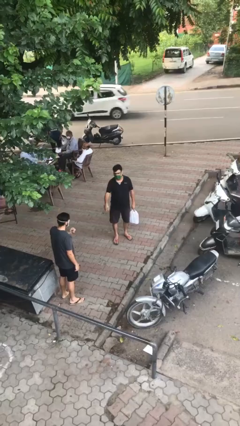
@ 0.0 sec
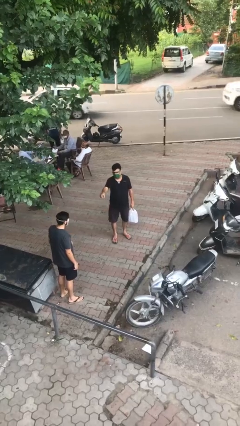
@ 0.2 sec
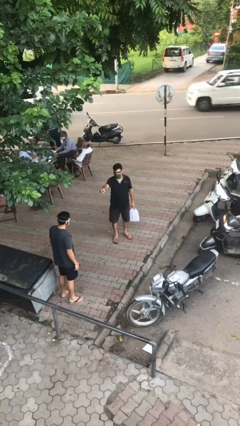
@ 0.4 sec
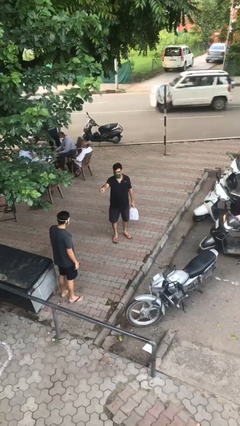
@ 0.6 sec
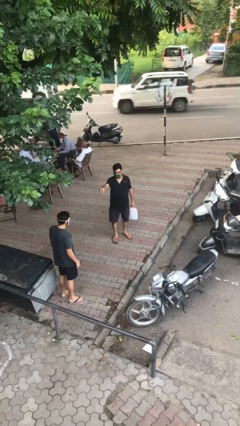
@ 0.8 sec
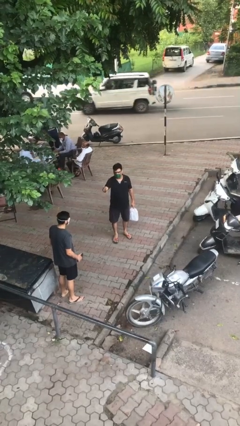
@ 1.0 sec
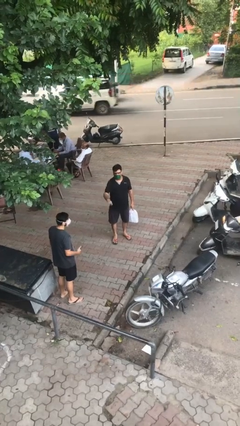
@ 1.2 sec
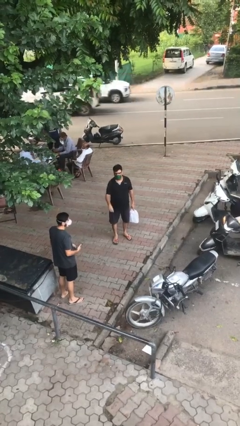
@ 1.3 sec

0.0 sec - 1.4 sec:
person points at person

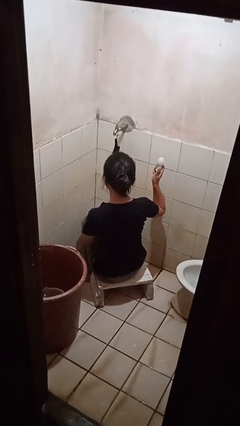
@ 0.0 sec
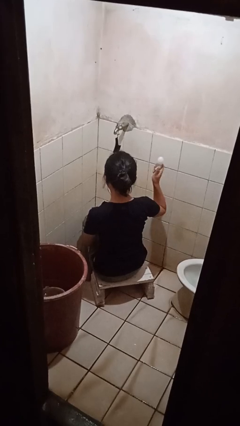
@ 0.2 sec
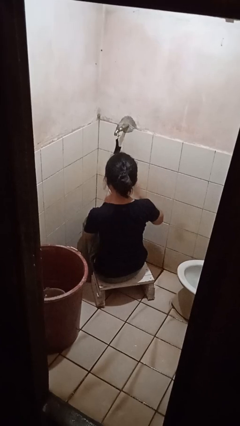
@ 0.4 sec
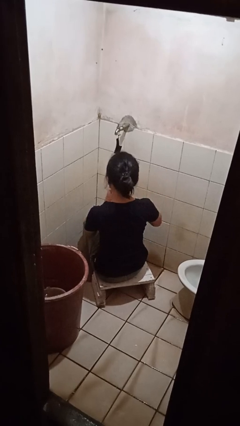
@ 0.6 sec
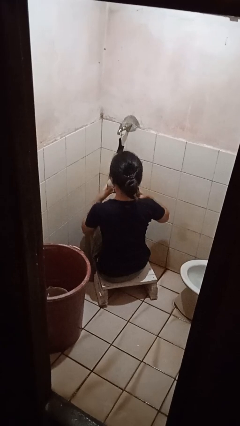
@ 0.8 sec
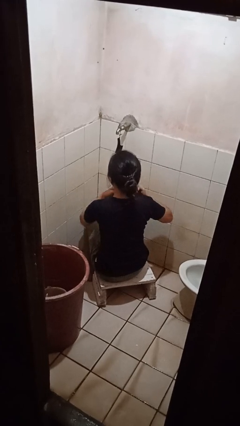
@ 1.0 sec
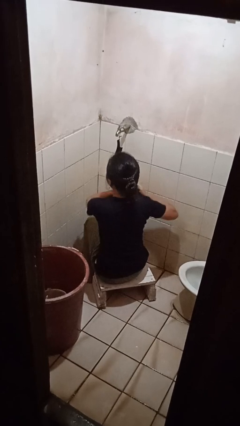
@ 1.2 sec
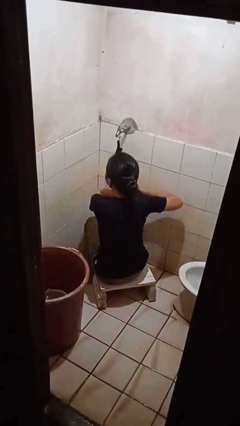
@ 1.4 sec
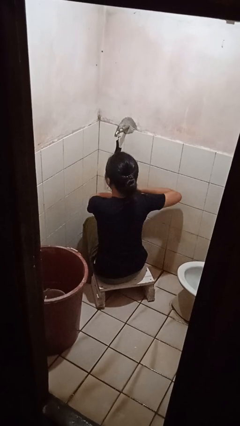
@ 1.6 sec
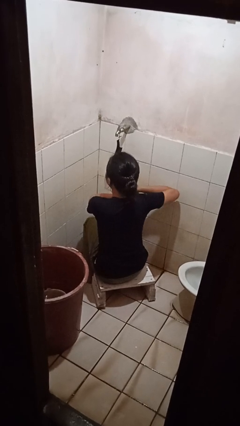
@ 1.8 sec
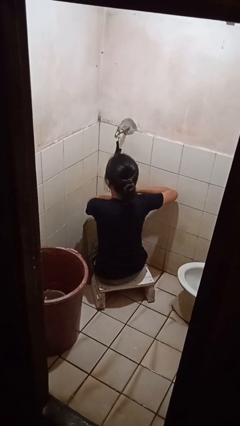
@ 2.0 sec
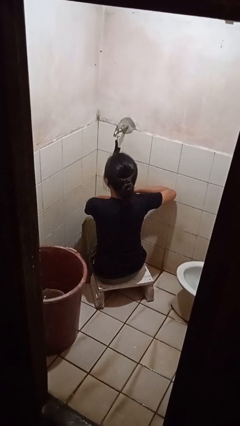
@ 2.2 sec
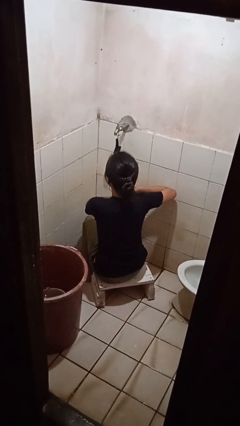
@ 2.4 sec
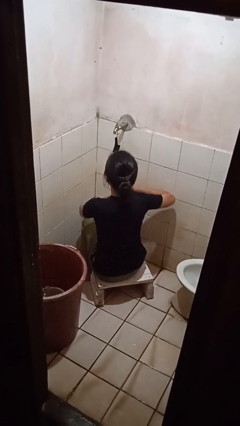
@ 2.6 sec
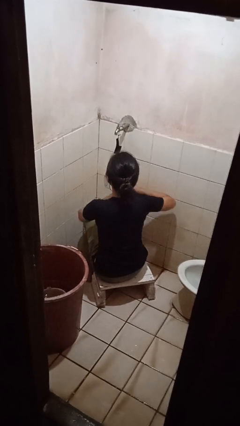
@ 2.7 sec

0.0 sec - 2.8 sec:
person applies deodorant

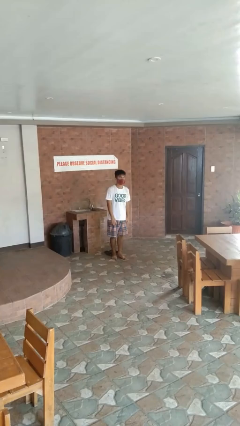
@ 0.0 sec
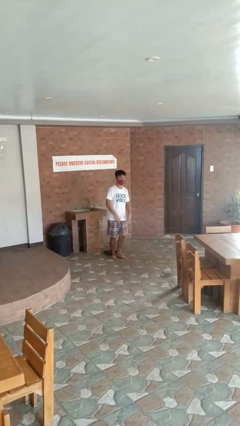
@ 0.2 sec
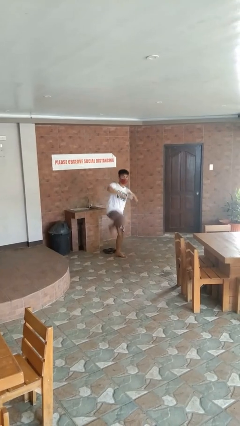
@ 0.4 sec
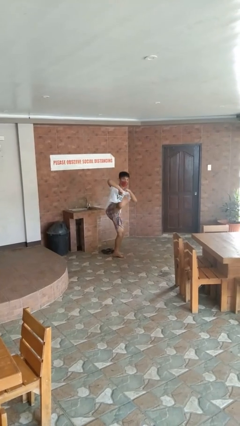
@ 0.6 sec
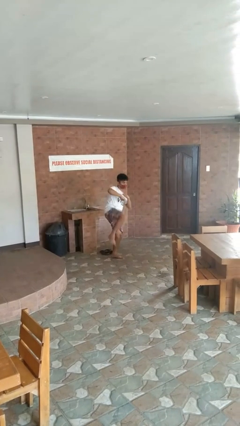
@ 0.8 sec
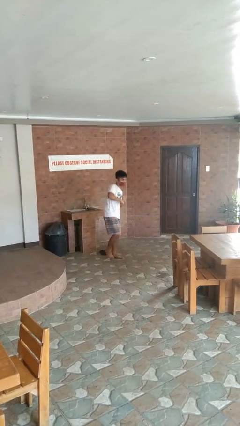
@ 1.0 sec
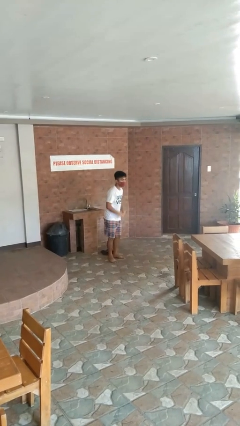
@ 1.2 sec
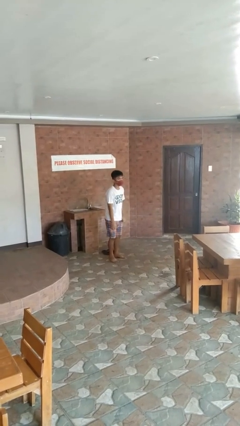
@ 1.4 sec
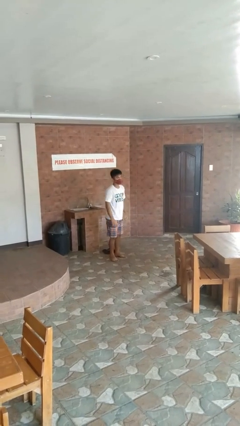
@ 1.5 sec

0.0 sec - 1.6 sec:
person karate kicks

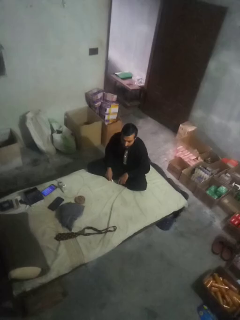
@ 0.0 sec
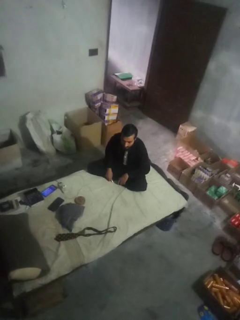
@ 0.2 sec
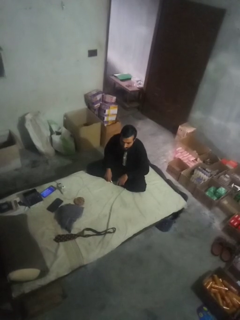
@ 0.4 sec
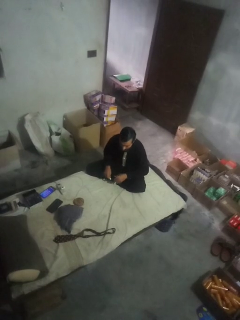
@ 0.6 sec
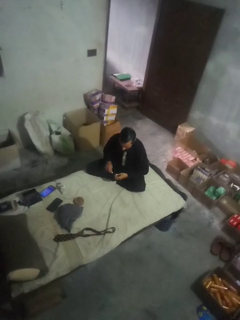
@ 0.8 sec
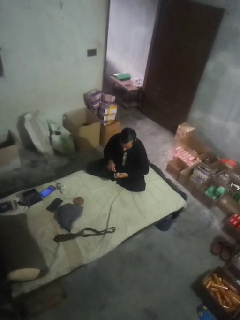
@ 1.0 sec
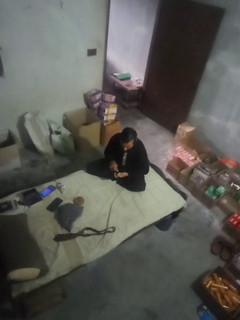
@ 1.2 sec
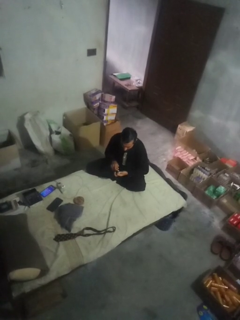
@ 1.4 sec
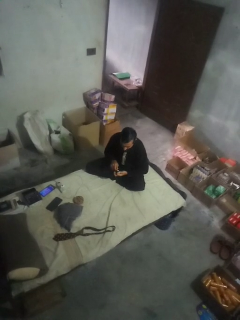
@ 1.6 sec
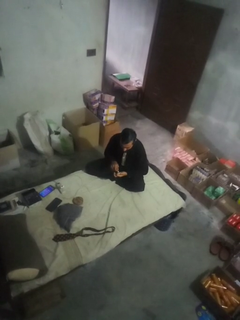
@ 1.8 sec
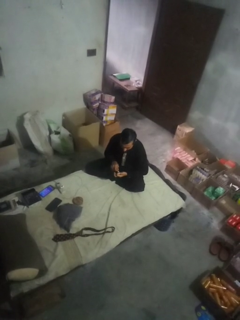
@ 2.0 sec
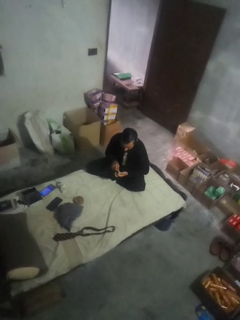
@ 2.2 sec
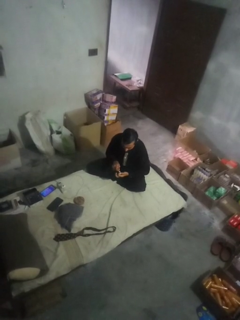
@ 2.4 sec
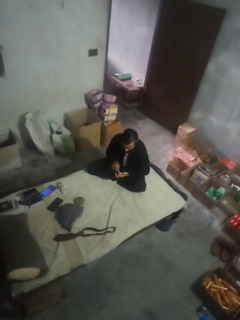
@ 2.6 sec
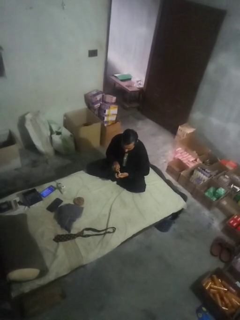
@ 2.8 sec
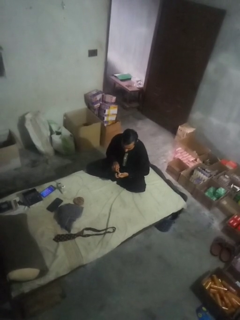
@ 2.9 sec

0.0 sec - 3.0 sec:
person paints fingernails

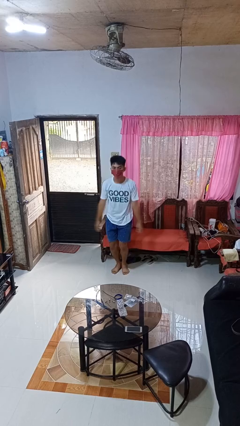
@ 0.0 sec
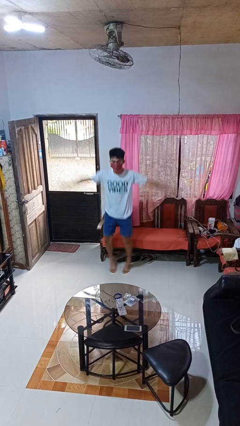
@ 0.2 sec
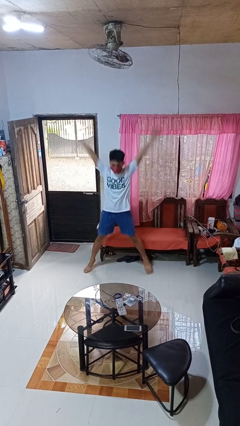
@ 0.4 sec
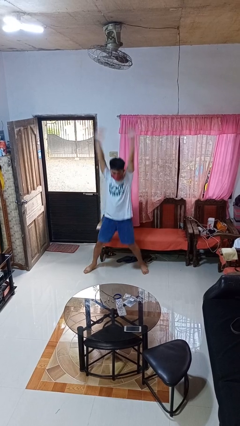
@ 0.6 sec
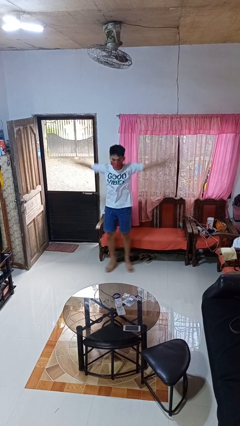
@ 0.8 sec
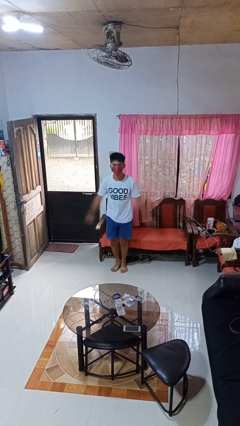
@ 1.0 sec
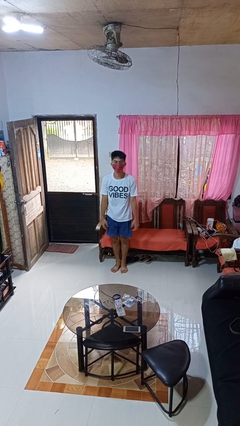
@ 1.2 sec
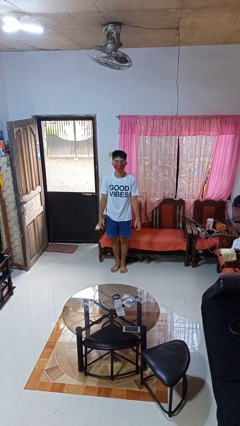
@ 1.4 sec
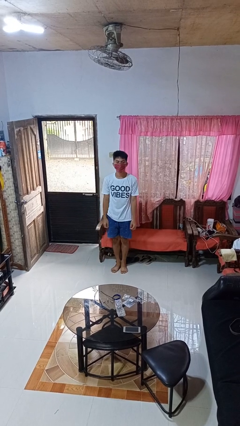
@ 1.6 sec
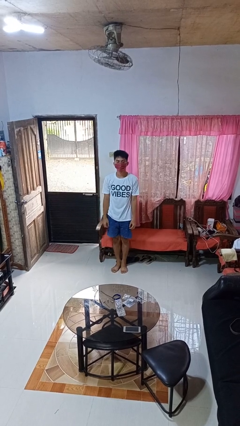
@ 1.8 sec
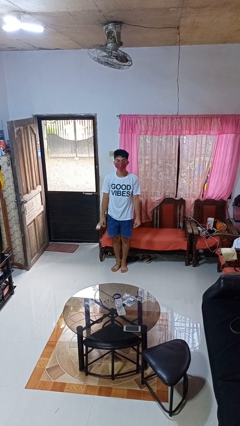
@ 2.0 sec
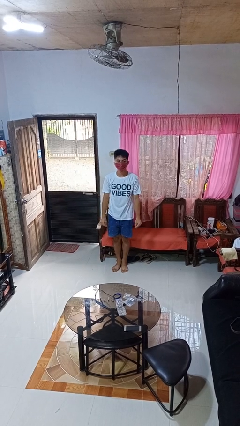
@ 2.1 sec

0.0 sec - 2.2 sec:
person exercises with jumping jacks

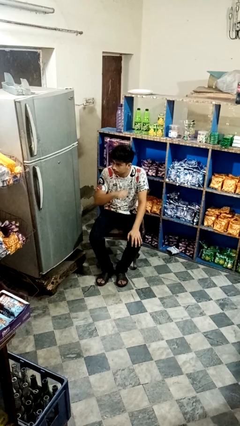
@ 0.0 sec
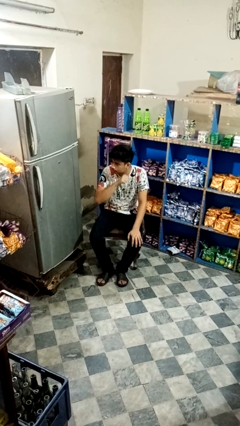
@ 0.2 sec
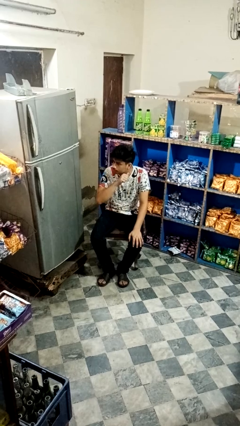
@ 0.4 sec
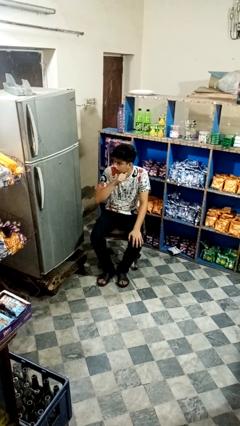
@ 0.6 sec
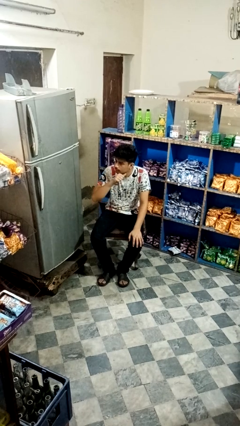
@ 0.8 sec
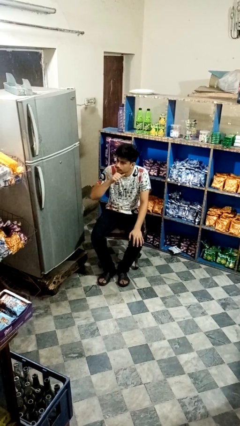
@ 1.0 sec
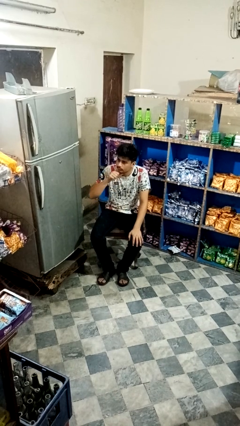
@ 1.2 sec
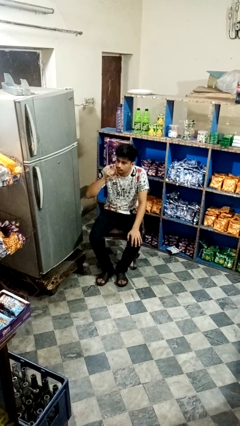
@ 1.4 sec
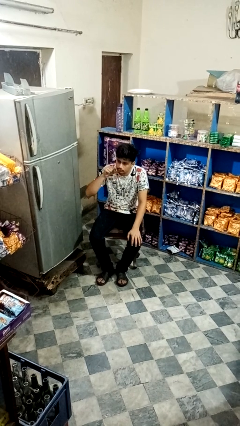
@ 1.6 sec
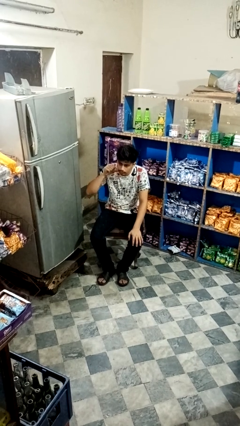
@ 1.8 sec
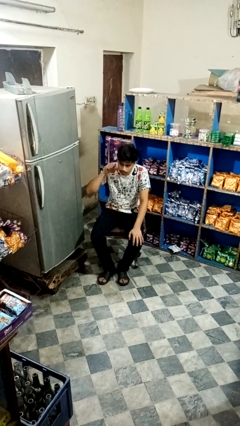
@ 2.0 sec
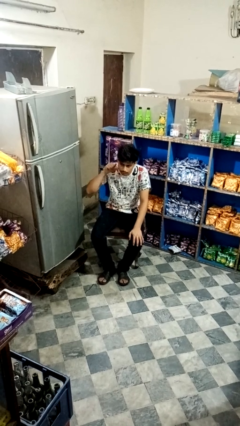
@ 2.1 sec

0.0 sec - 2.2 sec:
person gestures cut

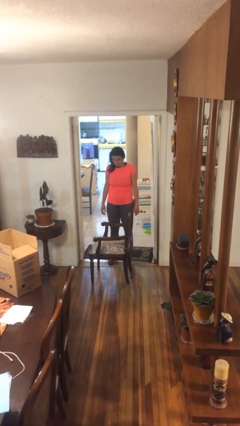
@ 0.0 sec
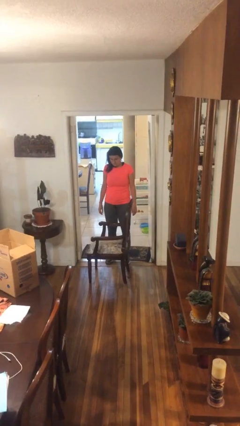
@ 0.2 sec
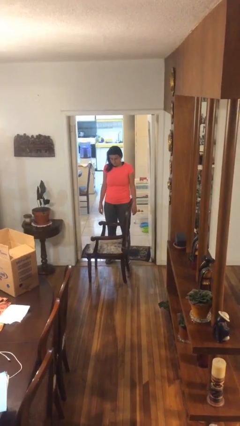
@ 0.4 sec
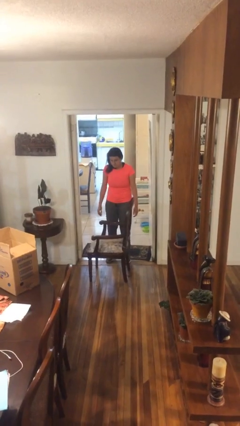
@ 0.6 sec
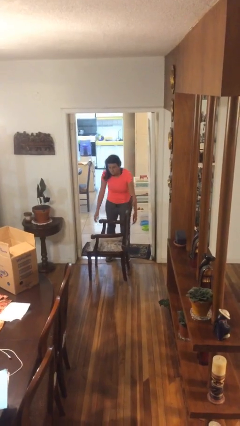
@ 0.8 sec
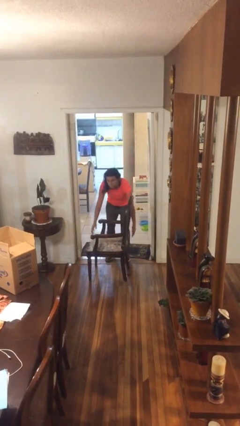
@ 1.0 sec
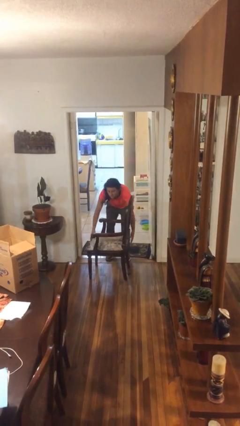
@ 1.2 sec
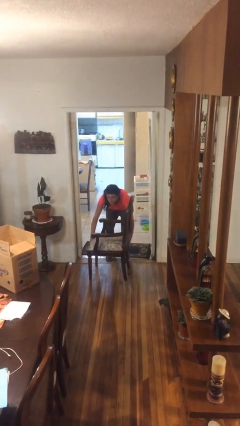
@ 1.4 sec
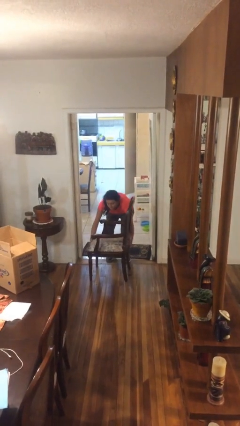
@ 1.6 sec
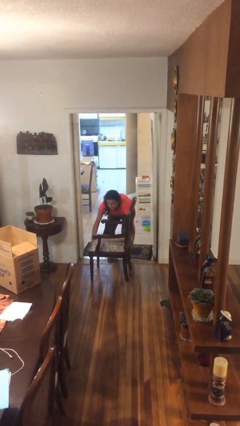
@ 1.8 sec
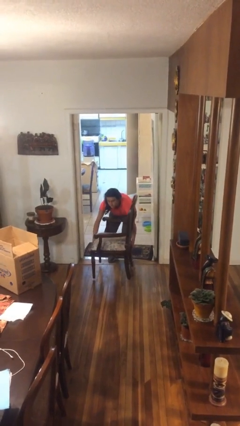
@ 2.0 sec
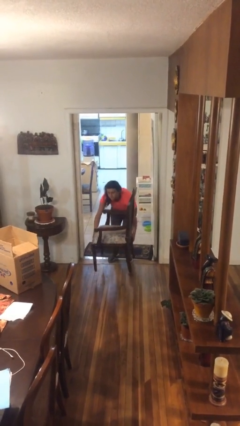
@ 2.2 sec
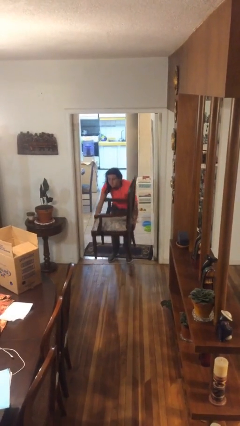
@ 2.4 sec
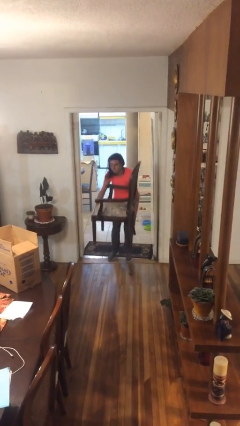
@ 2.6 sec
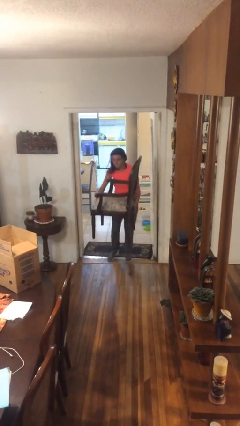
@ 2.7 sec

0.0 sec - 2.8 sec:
person picks up object from floor

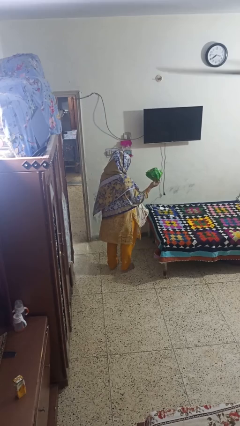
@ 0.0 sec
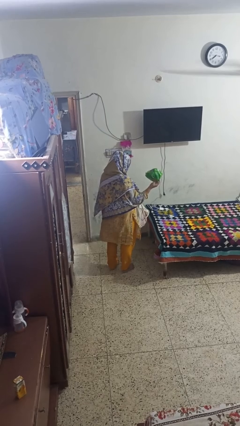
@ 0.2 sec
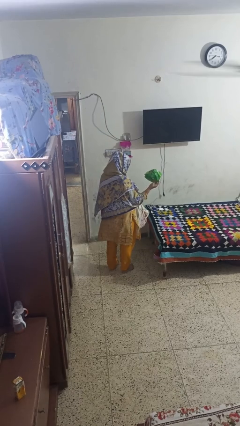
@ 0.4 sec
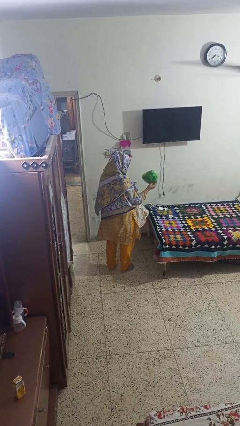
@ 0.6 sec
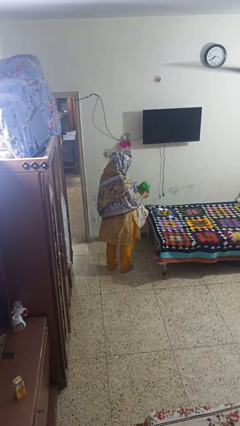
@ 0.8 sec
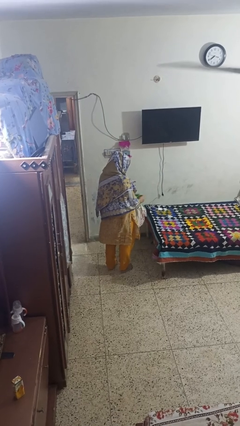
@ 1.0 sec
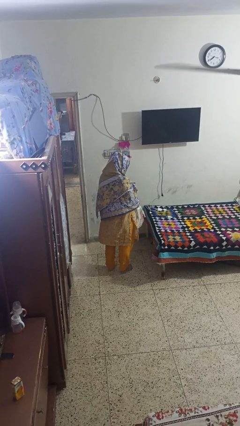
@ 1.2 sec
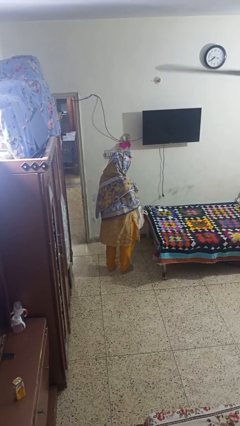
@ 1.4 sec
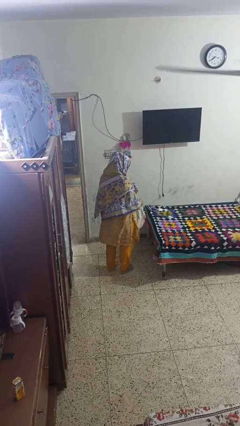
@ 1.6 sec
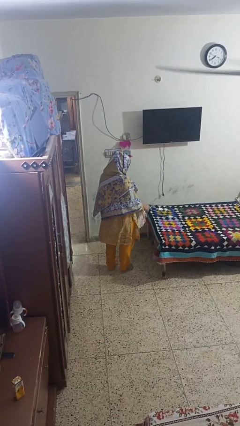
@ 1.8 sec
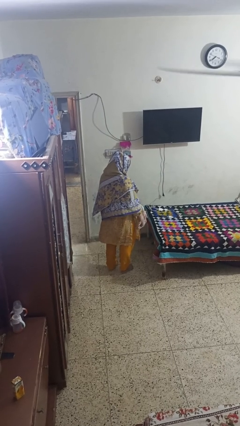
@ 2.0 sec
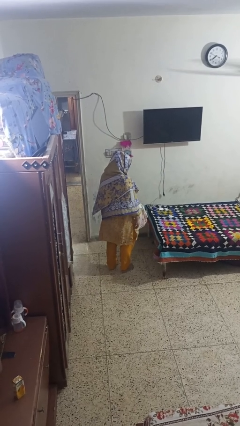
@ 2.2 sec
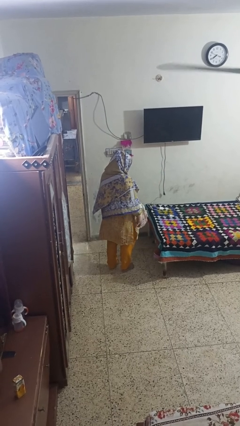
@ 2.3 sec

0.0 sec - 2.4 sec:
person puts object into bag
